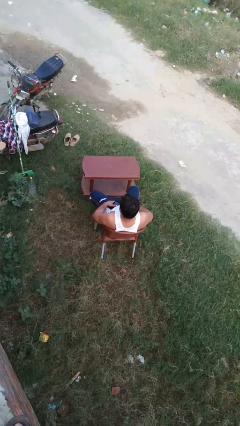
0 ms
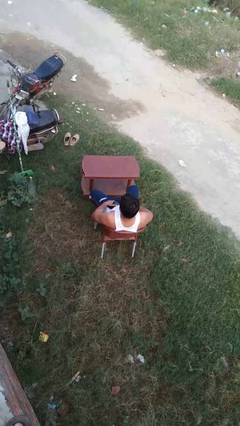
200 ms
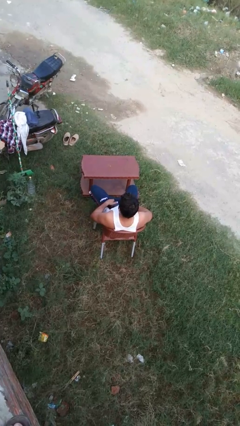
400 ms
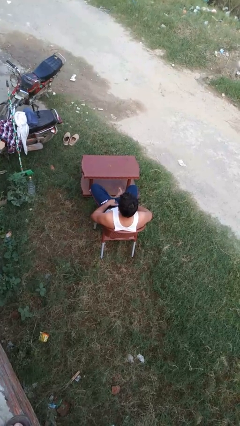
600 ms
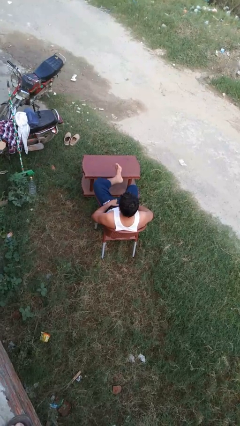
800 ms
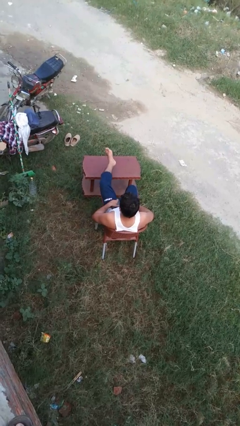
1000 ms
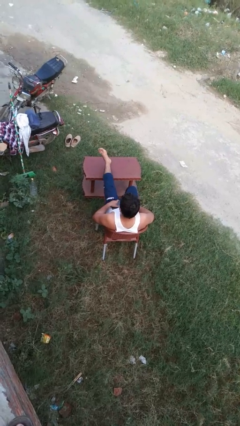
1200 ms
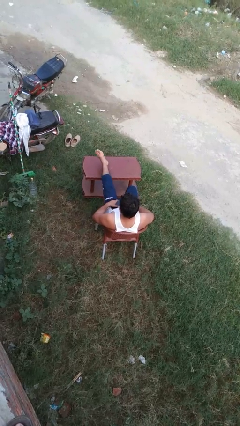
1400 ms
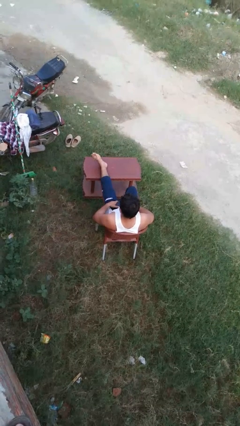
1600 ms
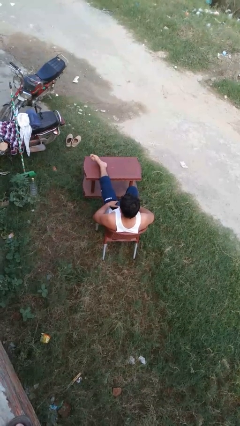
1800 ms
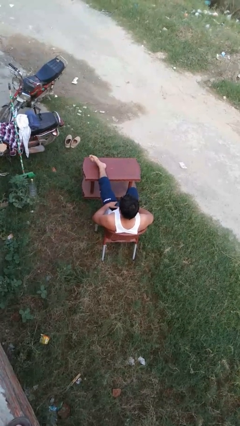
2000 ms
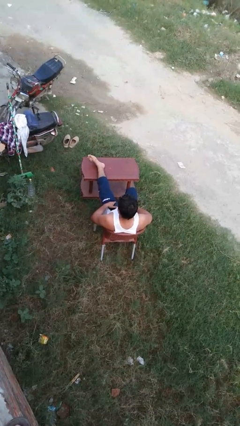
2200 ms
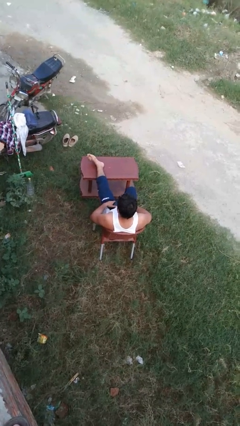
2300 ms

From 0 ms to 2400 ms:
person puts feet up

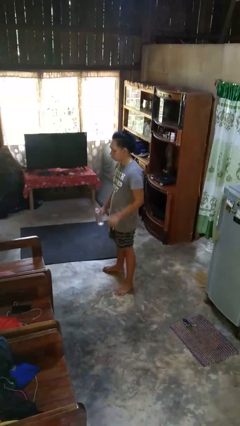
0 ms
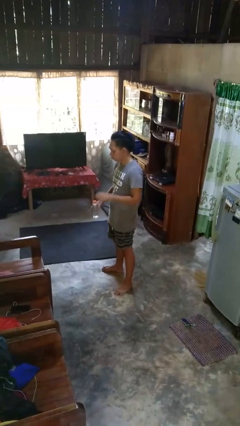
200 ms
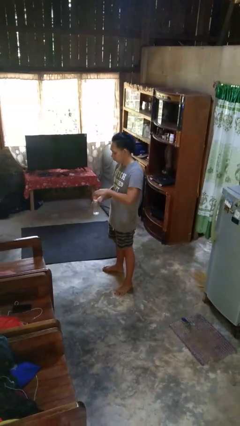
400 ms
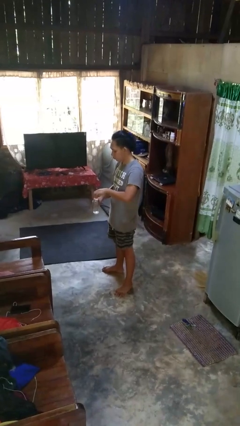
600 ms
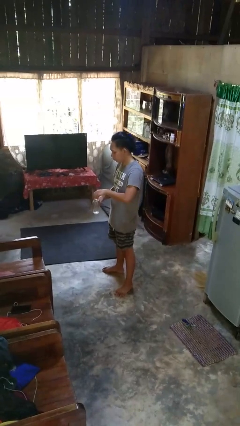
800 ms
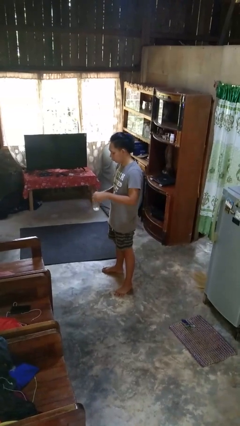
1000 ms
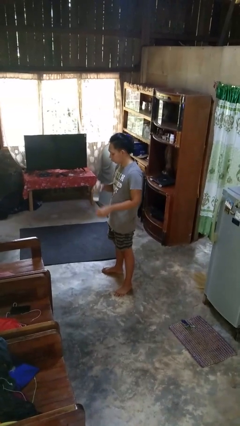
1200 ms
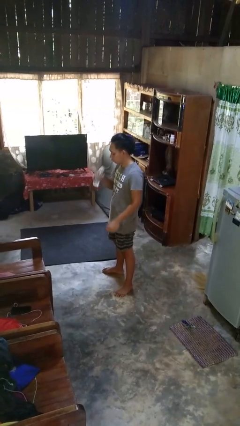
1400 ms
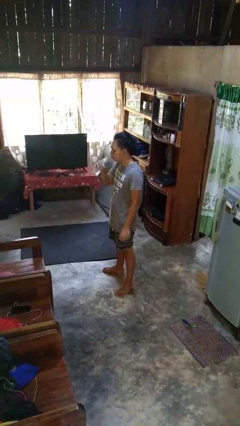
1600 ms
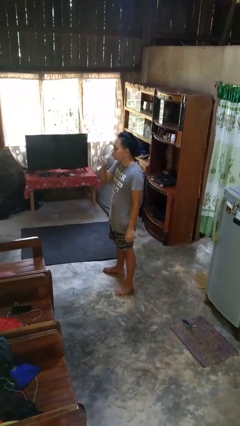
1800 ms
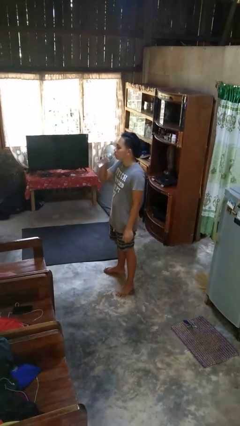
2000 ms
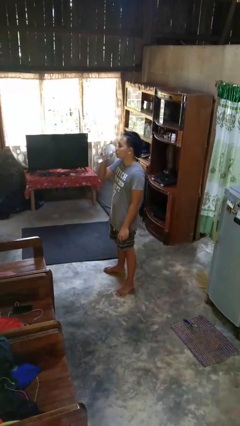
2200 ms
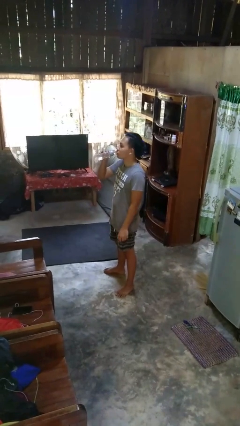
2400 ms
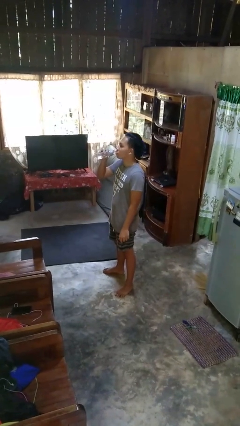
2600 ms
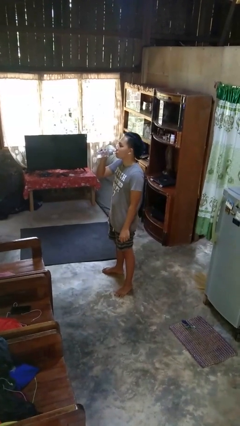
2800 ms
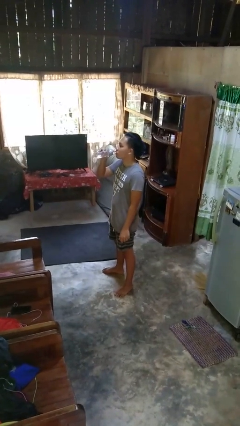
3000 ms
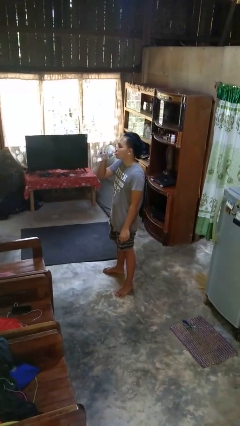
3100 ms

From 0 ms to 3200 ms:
person drinks from bottle

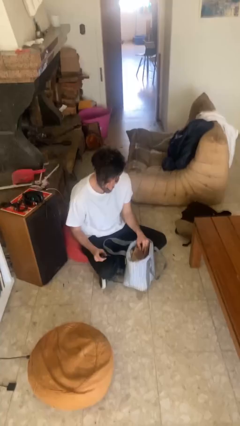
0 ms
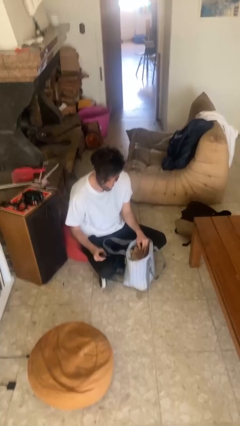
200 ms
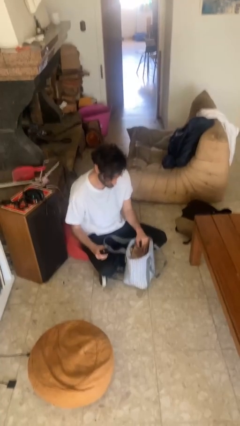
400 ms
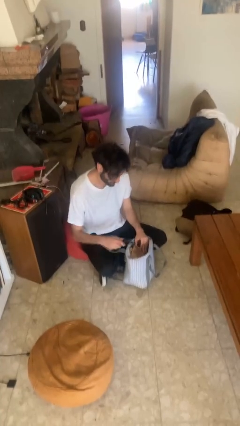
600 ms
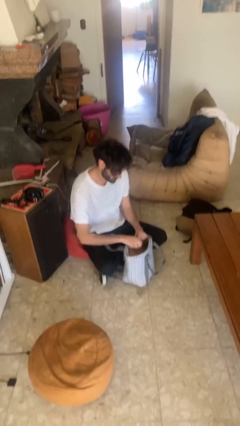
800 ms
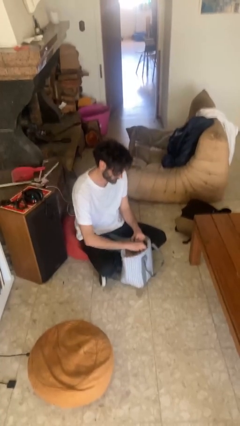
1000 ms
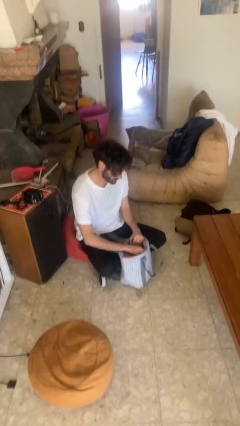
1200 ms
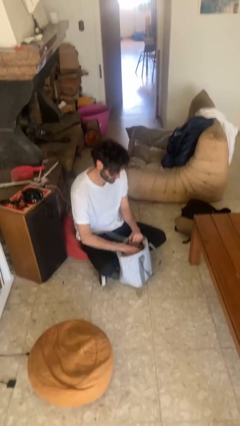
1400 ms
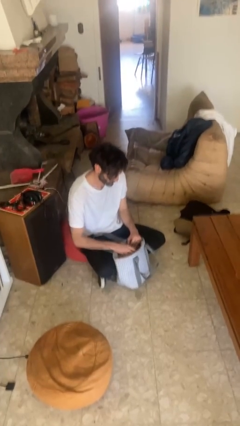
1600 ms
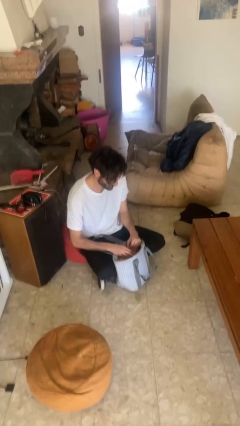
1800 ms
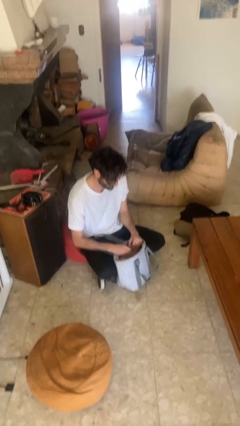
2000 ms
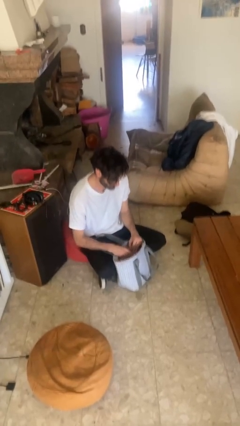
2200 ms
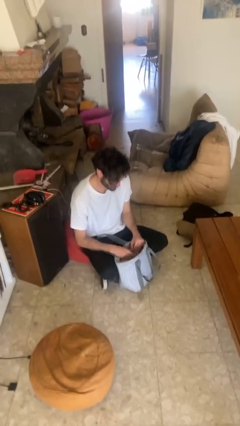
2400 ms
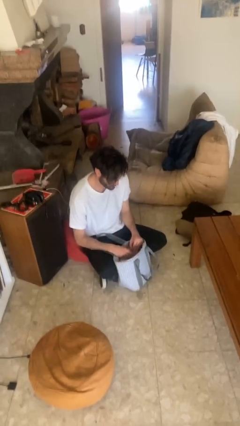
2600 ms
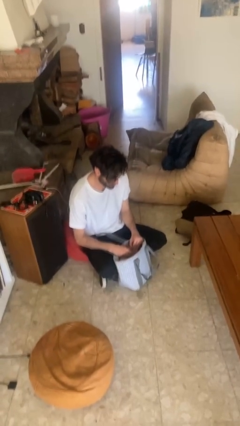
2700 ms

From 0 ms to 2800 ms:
person puts object into purse

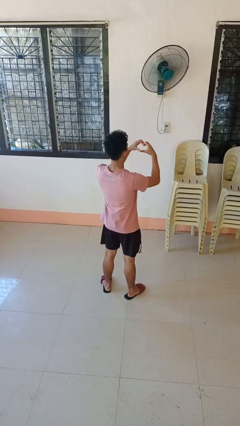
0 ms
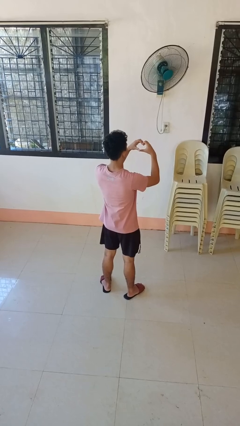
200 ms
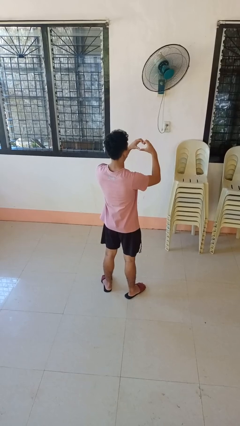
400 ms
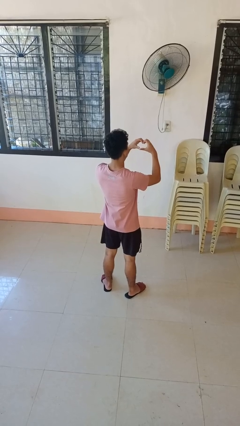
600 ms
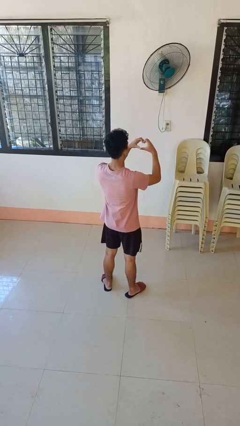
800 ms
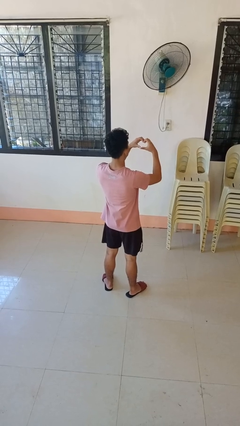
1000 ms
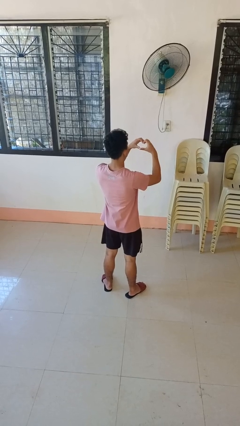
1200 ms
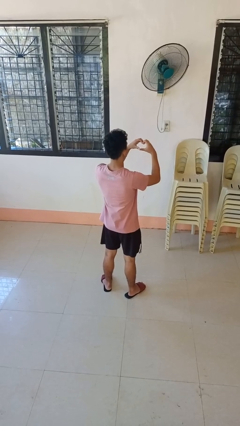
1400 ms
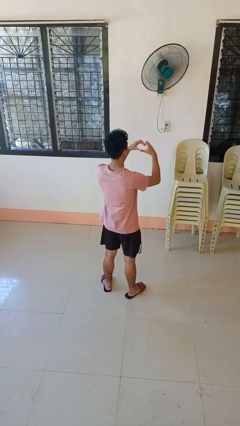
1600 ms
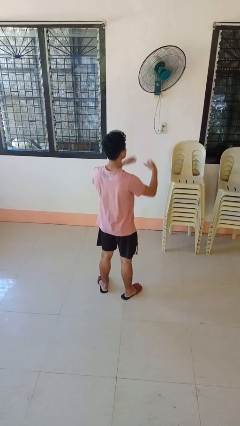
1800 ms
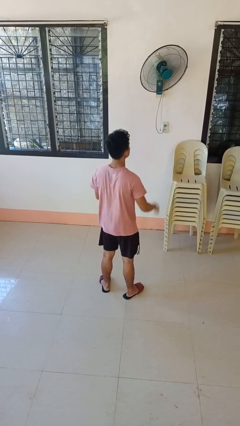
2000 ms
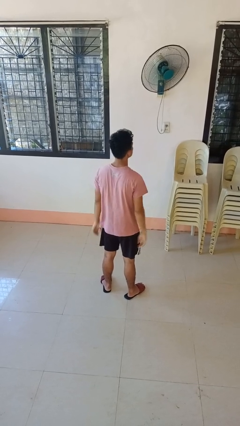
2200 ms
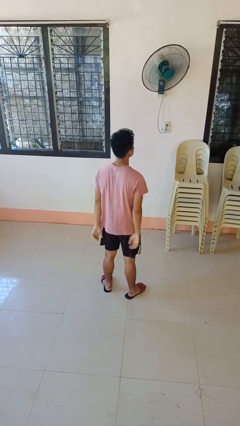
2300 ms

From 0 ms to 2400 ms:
person gestures heart

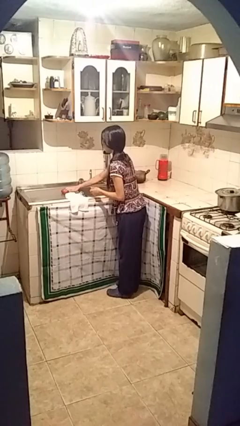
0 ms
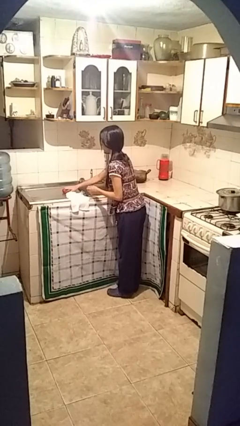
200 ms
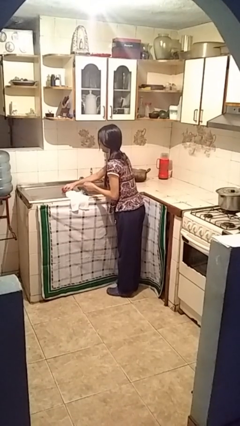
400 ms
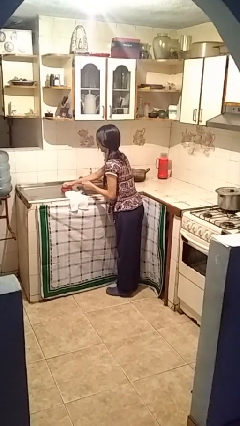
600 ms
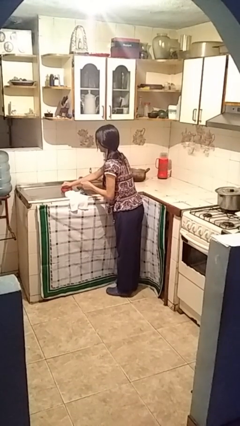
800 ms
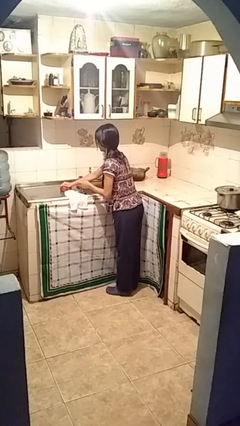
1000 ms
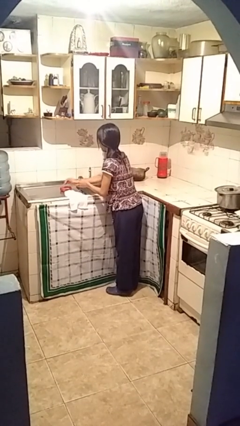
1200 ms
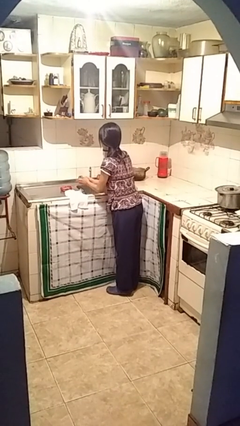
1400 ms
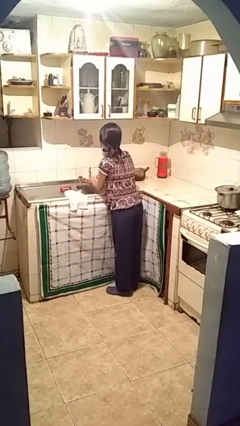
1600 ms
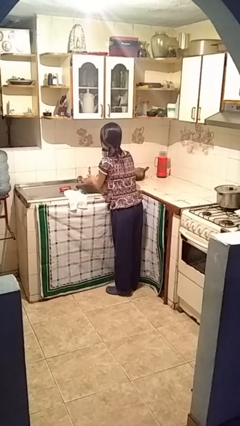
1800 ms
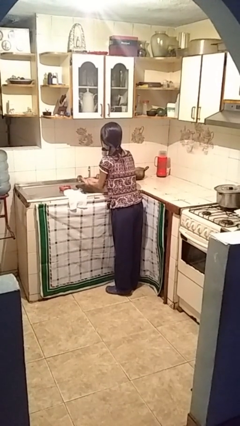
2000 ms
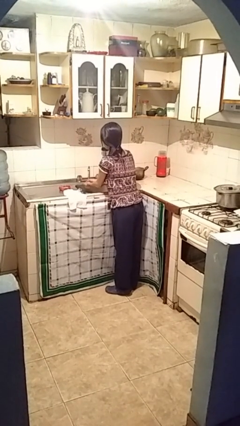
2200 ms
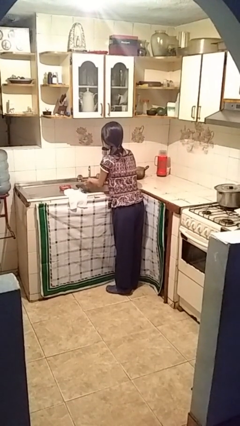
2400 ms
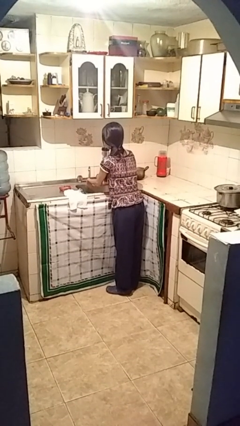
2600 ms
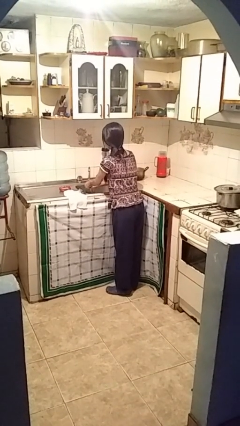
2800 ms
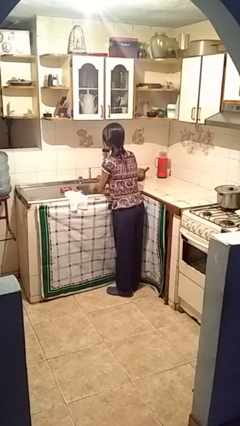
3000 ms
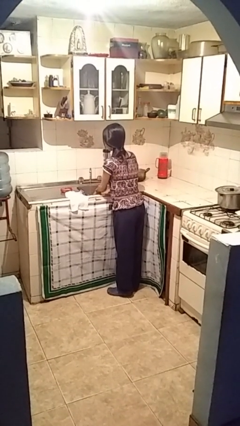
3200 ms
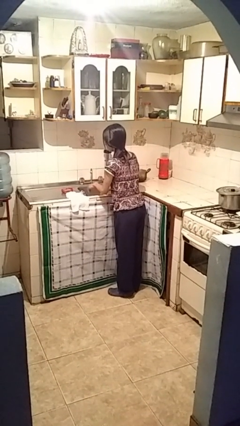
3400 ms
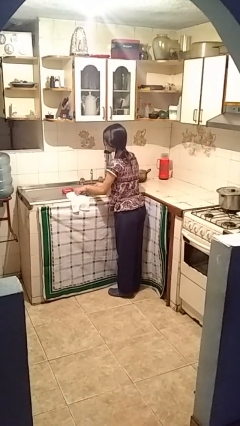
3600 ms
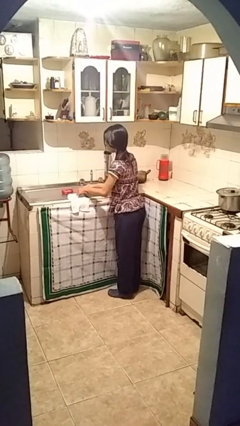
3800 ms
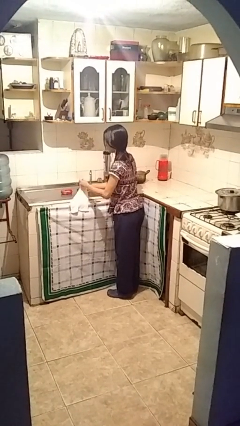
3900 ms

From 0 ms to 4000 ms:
person washes hands

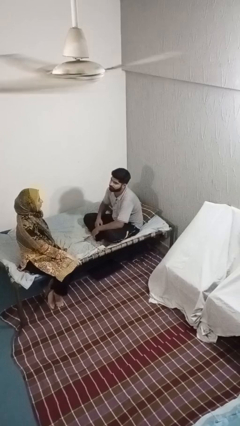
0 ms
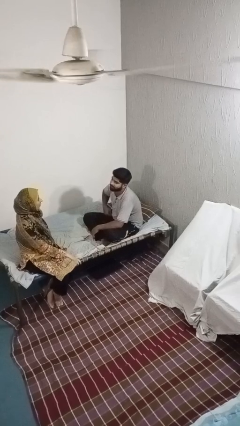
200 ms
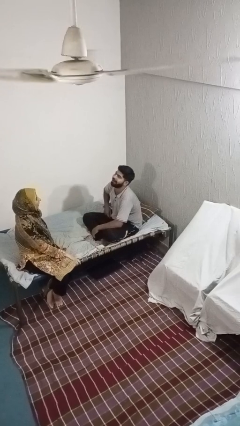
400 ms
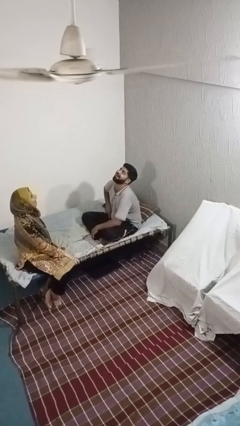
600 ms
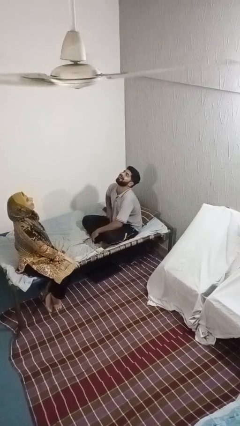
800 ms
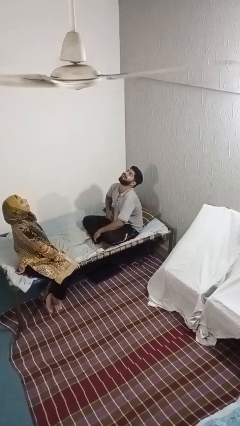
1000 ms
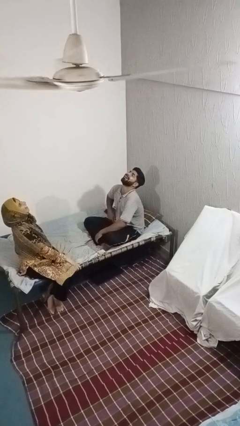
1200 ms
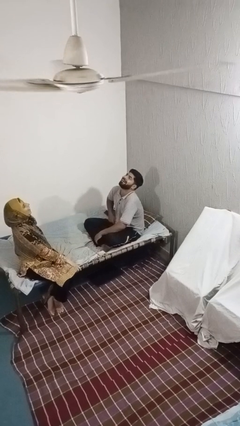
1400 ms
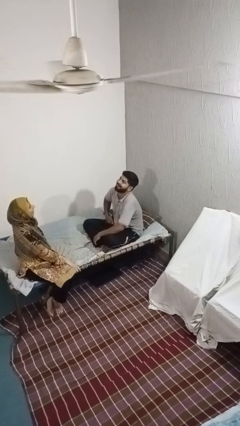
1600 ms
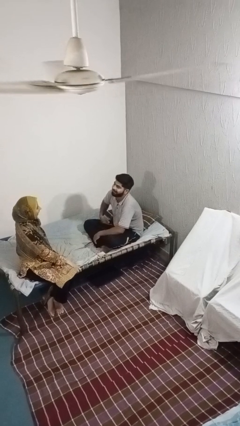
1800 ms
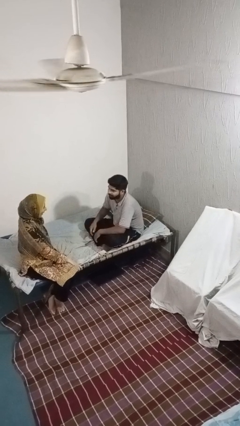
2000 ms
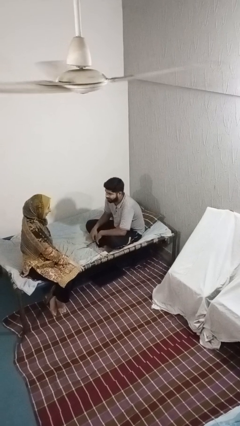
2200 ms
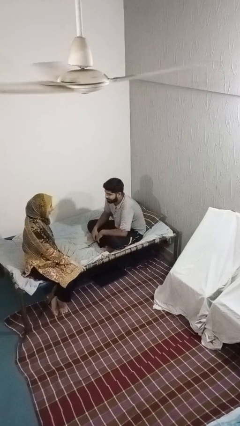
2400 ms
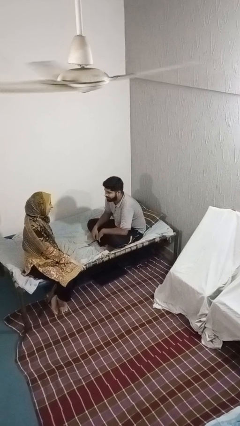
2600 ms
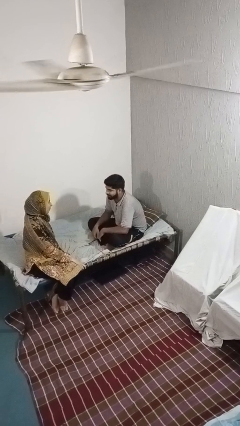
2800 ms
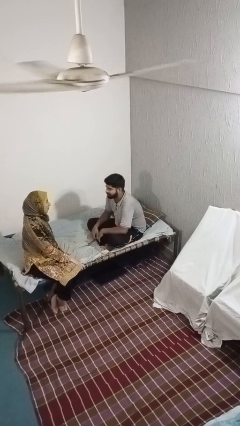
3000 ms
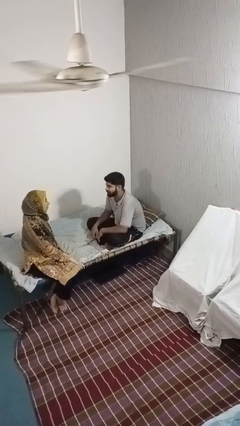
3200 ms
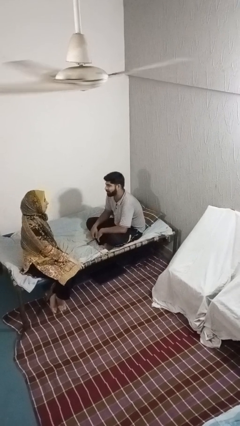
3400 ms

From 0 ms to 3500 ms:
person laughs with person
